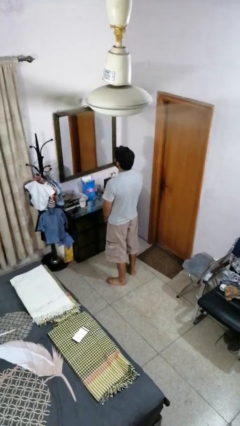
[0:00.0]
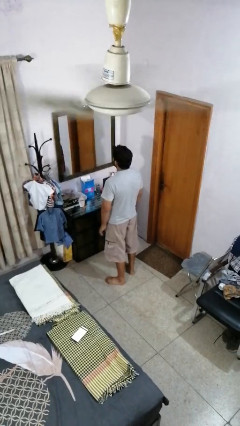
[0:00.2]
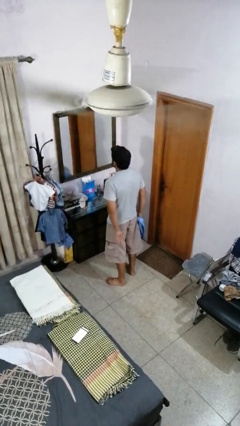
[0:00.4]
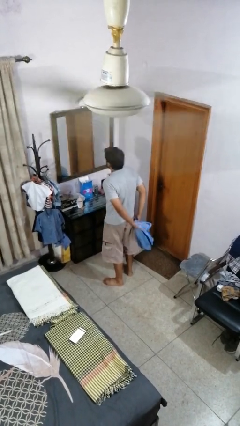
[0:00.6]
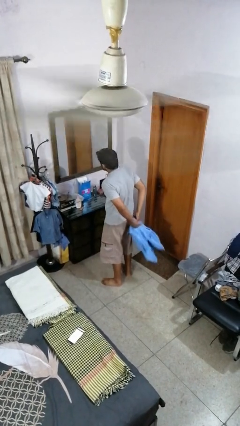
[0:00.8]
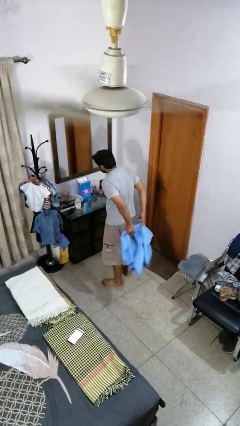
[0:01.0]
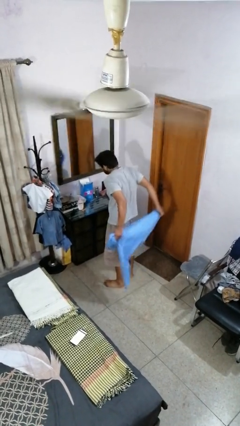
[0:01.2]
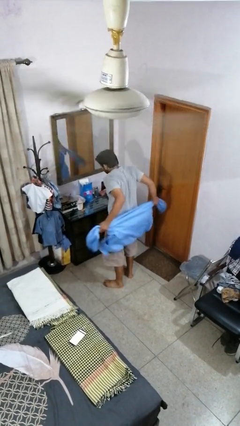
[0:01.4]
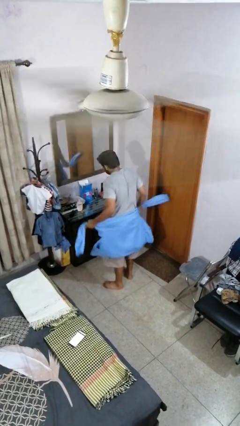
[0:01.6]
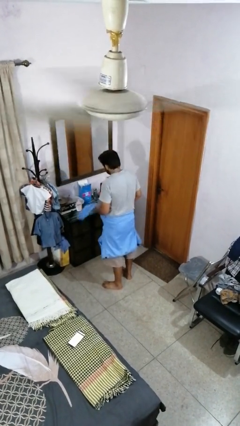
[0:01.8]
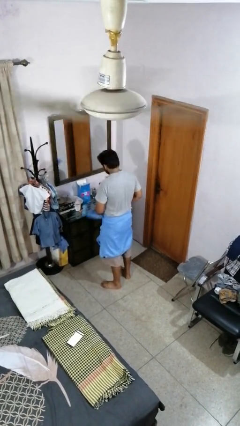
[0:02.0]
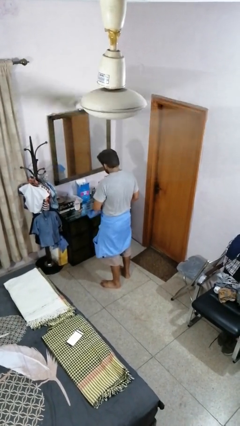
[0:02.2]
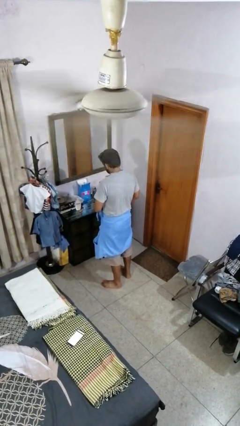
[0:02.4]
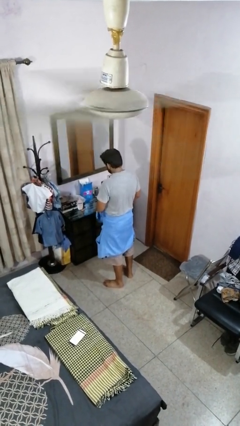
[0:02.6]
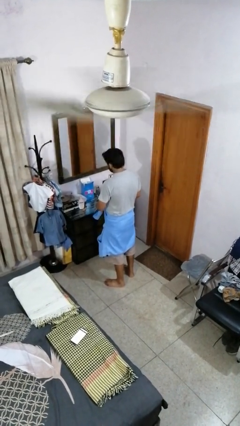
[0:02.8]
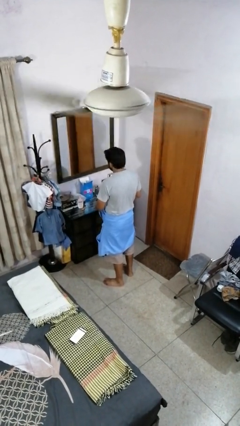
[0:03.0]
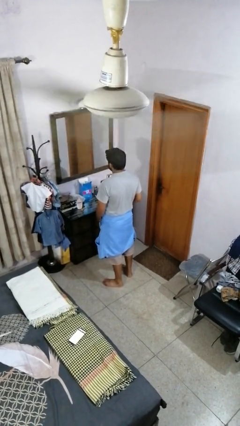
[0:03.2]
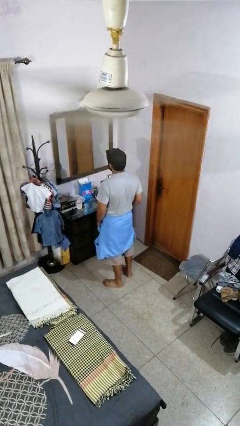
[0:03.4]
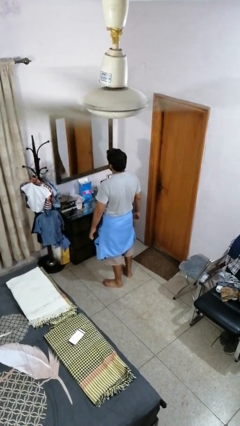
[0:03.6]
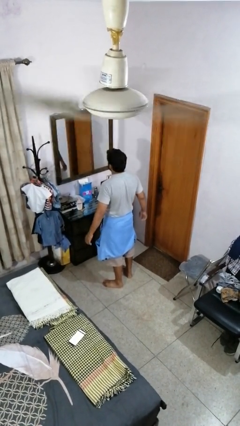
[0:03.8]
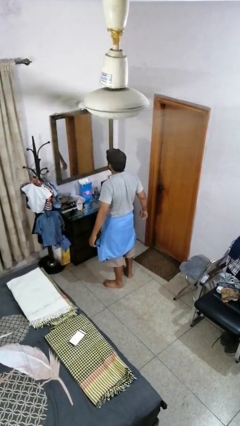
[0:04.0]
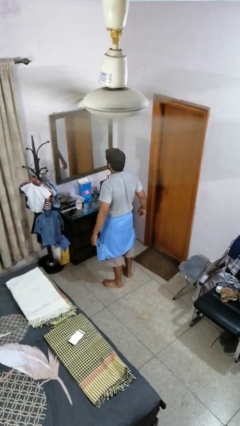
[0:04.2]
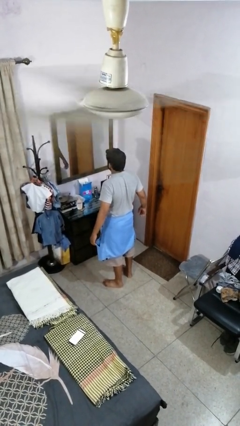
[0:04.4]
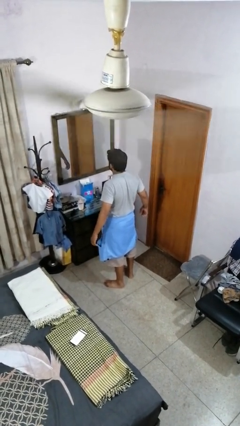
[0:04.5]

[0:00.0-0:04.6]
person ties jacket around waist

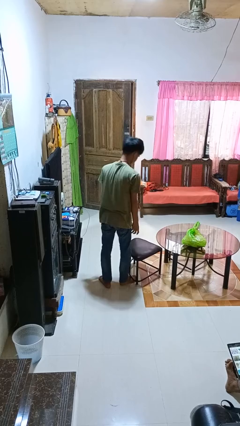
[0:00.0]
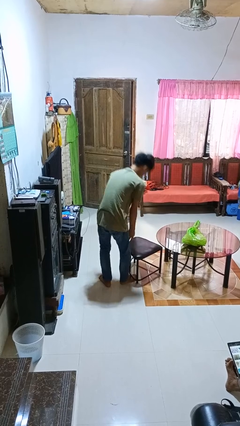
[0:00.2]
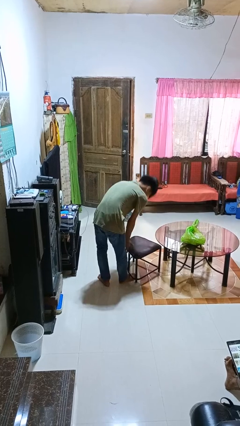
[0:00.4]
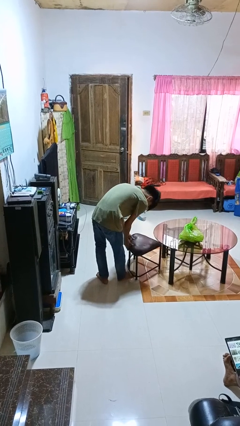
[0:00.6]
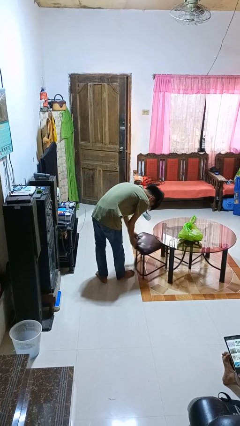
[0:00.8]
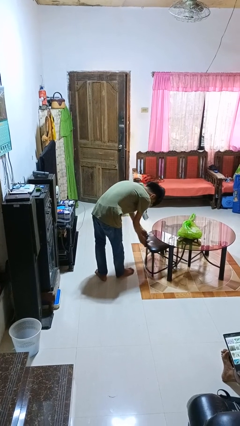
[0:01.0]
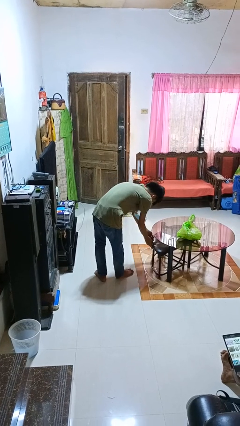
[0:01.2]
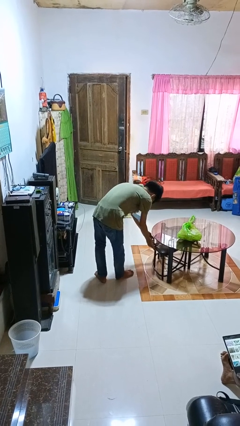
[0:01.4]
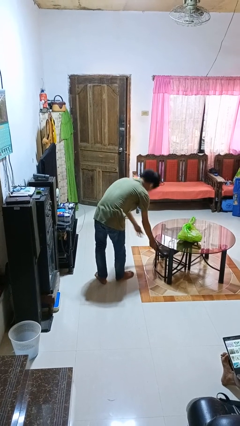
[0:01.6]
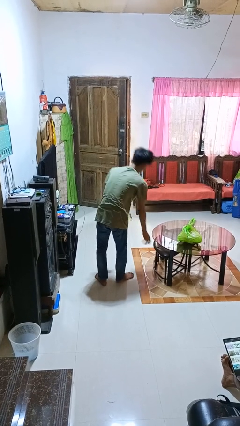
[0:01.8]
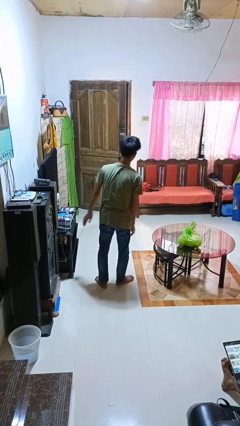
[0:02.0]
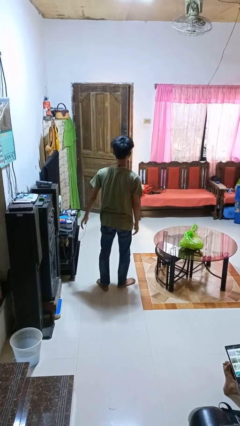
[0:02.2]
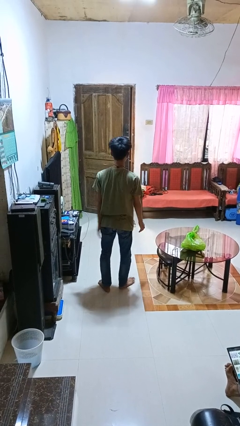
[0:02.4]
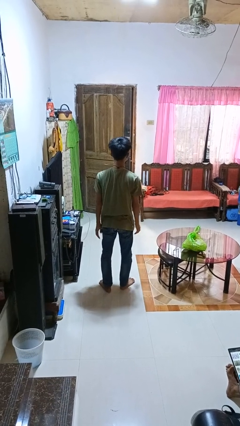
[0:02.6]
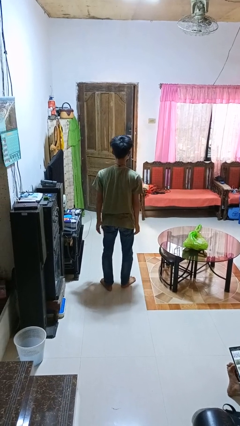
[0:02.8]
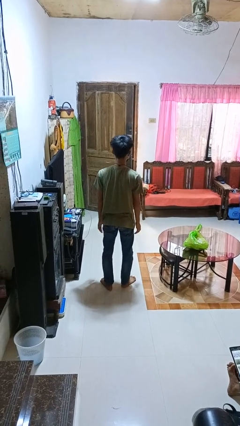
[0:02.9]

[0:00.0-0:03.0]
person pushes in chair

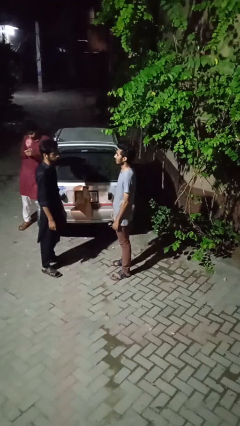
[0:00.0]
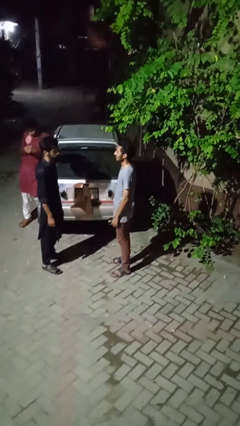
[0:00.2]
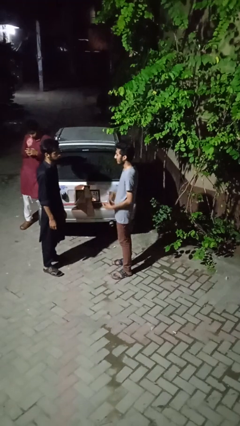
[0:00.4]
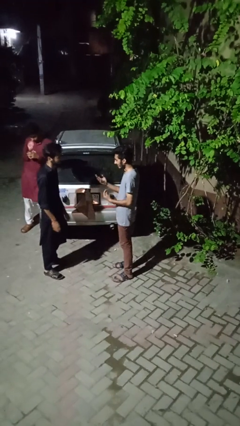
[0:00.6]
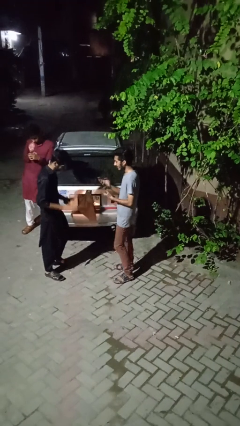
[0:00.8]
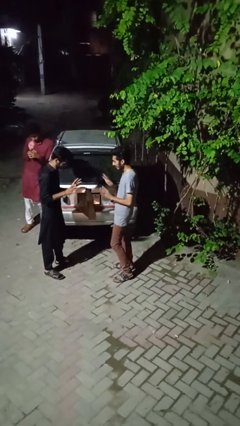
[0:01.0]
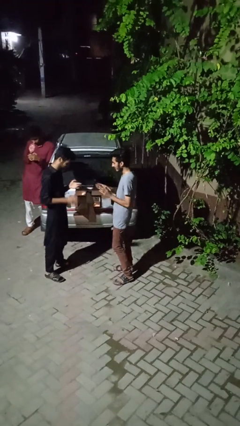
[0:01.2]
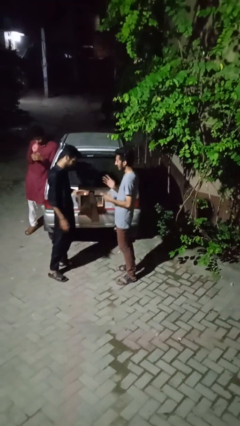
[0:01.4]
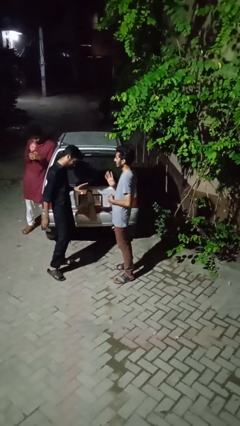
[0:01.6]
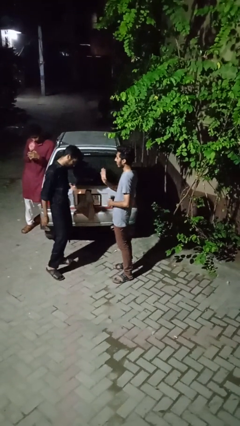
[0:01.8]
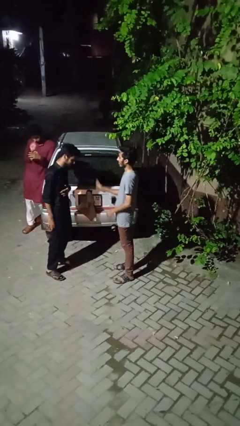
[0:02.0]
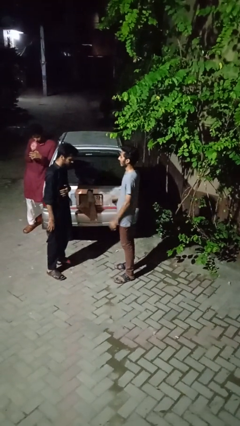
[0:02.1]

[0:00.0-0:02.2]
person talks to person

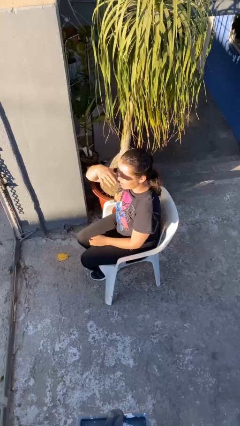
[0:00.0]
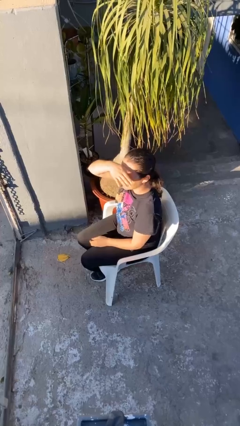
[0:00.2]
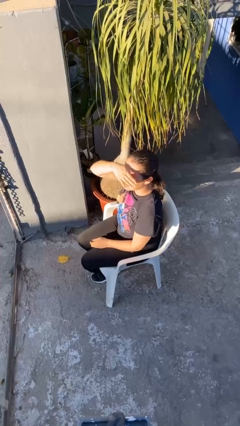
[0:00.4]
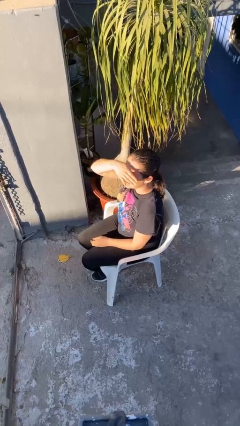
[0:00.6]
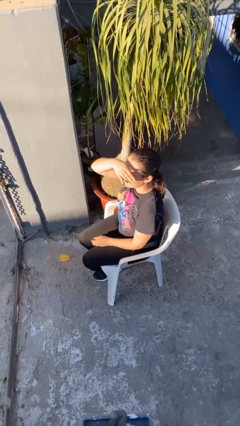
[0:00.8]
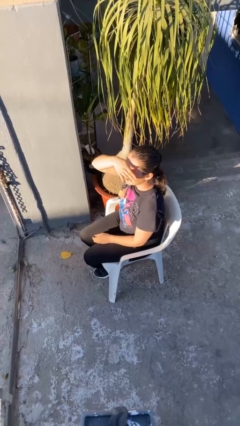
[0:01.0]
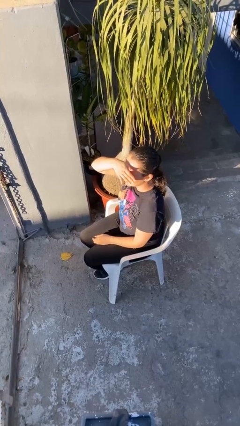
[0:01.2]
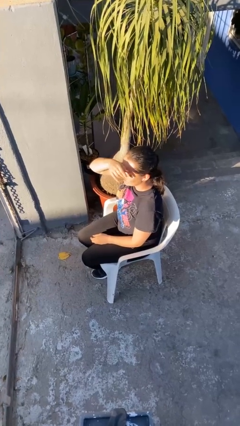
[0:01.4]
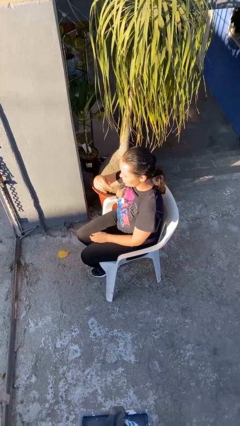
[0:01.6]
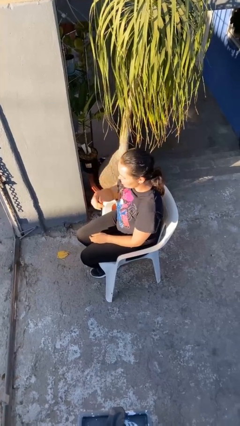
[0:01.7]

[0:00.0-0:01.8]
person shades eyes

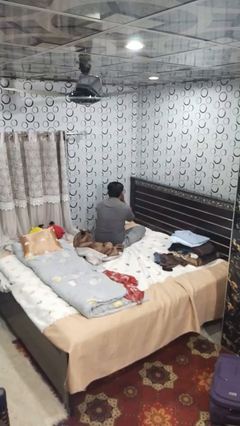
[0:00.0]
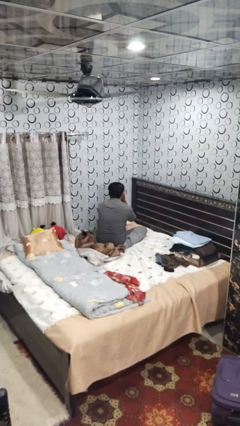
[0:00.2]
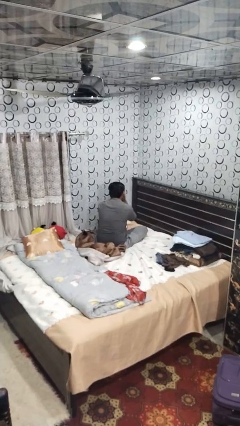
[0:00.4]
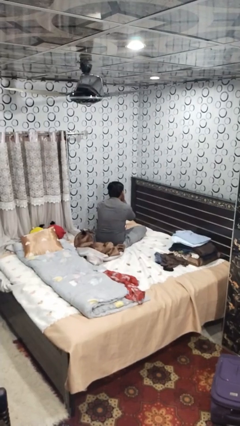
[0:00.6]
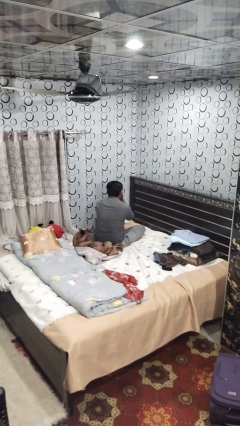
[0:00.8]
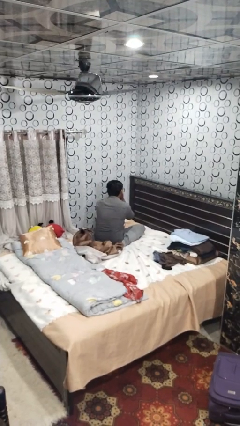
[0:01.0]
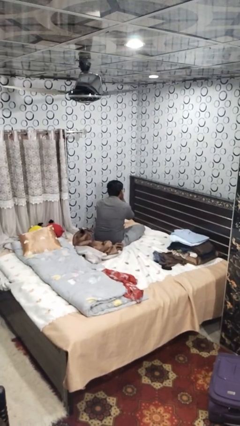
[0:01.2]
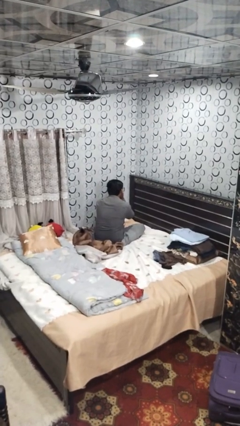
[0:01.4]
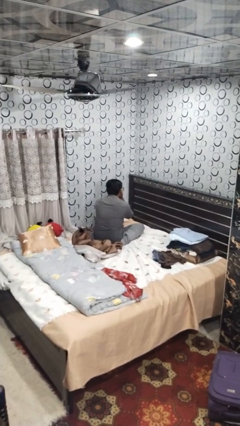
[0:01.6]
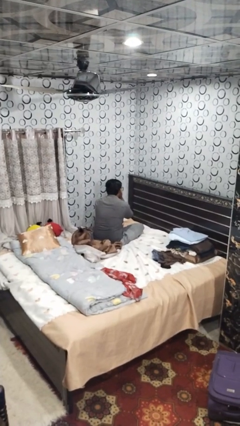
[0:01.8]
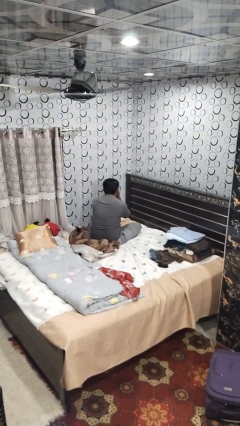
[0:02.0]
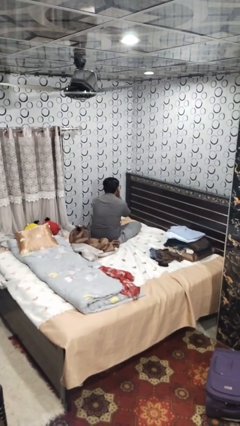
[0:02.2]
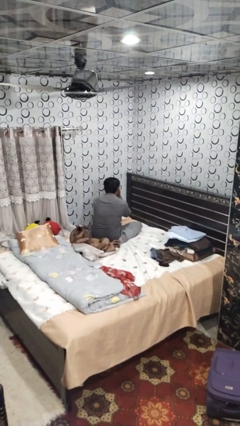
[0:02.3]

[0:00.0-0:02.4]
person covers face with hands

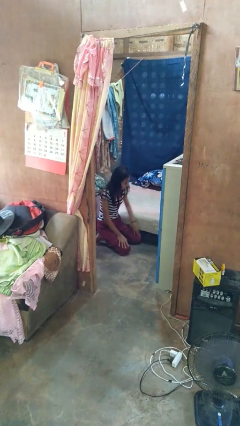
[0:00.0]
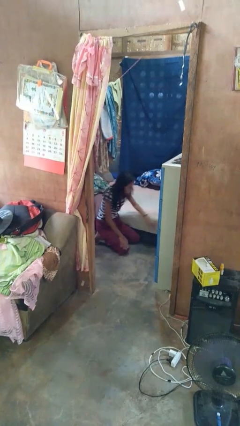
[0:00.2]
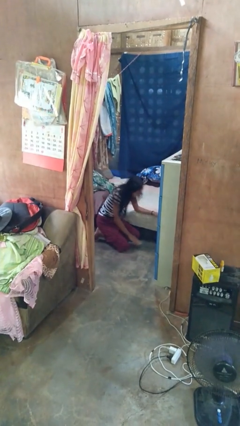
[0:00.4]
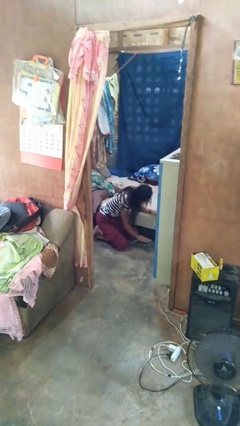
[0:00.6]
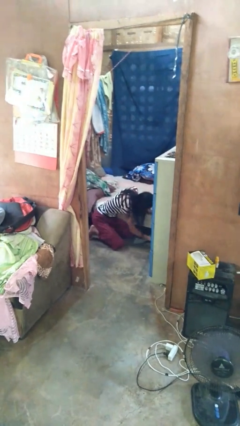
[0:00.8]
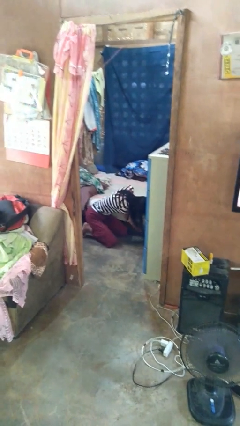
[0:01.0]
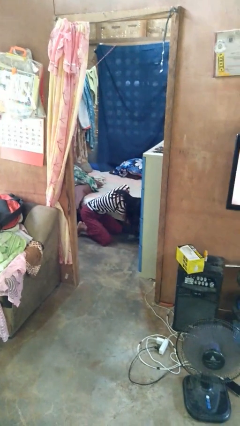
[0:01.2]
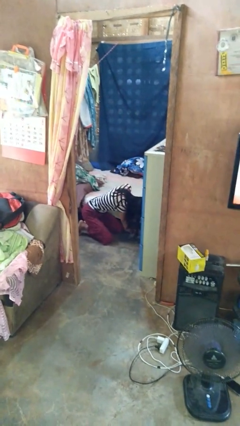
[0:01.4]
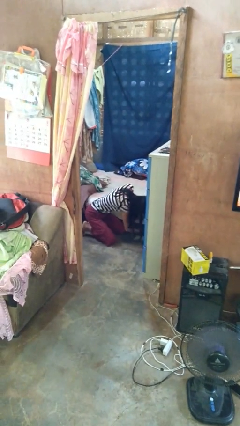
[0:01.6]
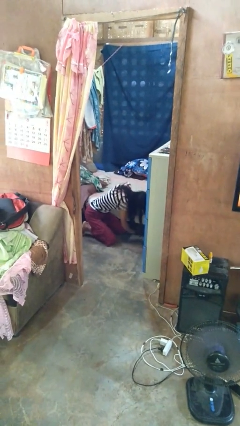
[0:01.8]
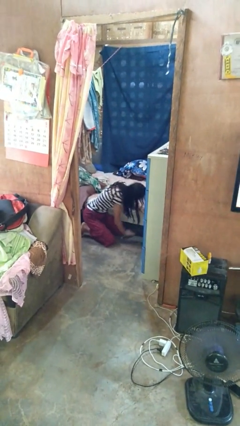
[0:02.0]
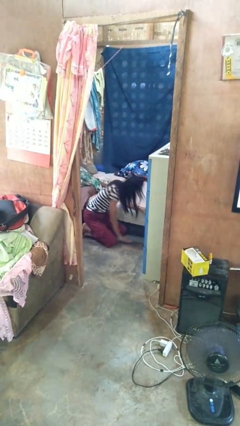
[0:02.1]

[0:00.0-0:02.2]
person searches under bed

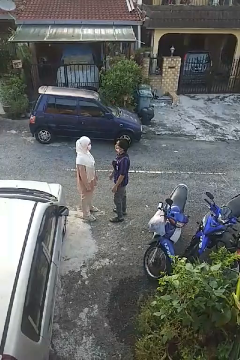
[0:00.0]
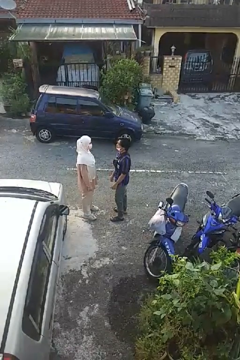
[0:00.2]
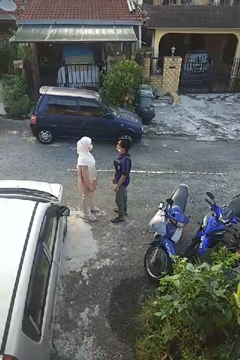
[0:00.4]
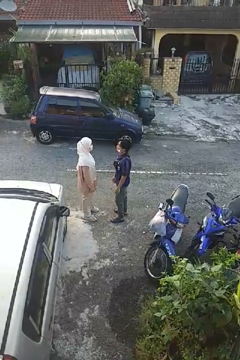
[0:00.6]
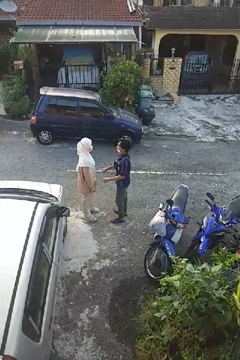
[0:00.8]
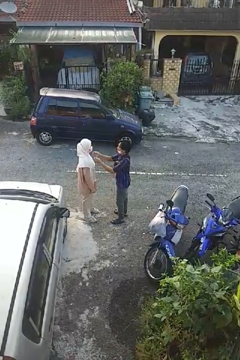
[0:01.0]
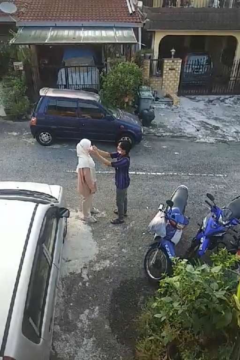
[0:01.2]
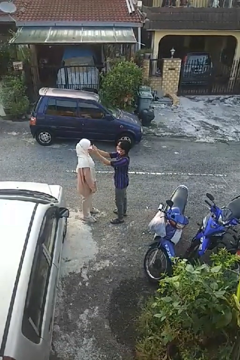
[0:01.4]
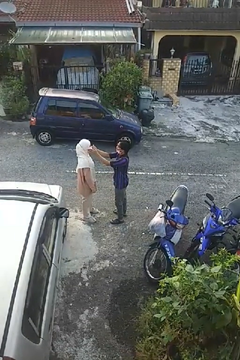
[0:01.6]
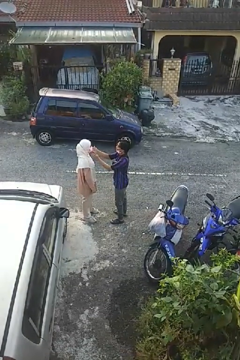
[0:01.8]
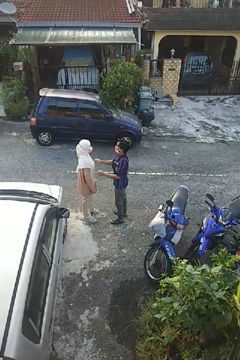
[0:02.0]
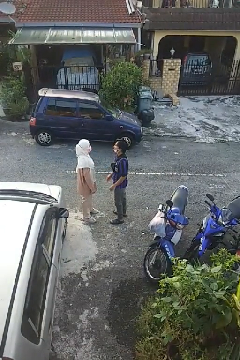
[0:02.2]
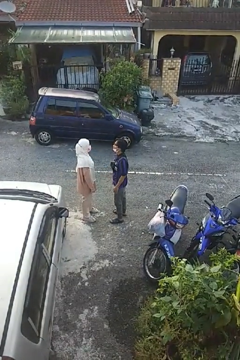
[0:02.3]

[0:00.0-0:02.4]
person touches face of person
